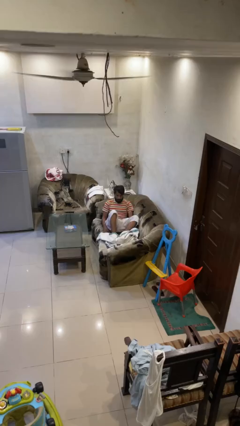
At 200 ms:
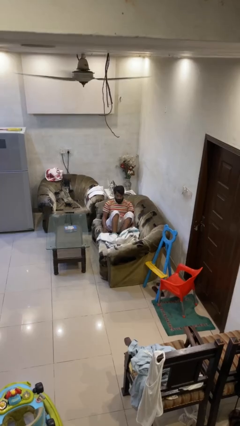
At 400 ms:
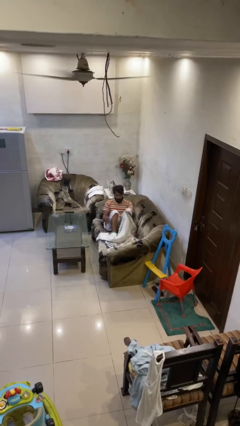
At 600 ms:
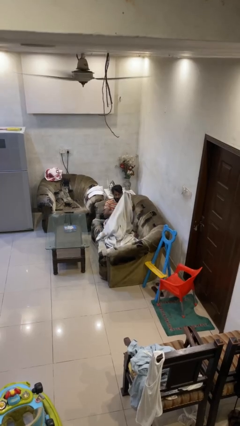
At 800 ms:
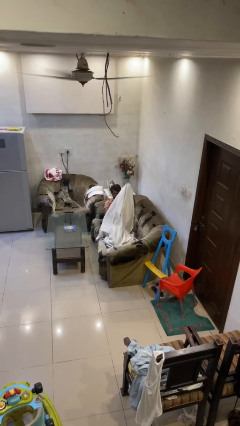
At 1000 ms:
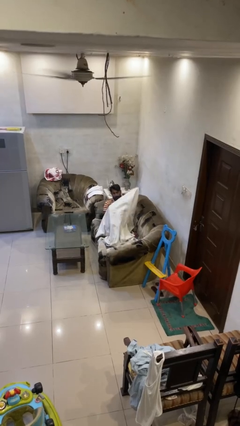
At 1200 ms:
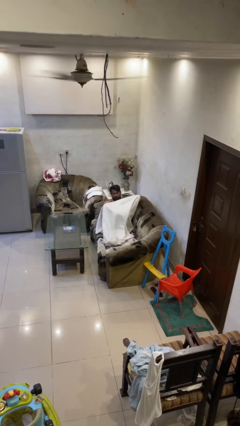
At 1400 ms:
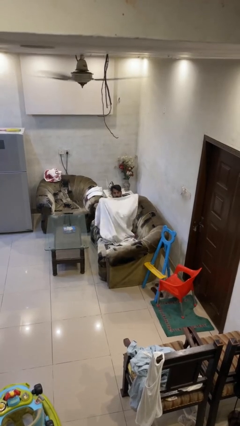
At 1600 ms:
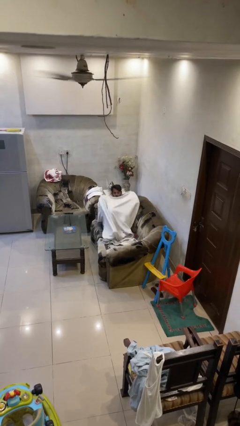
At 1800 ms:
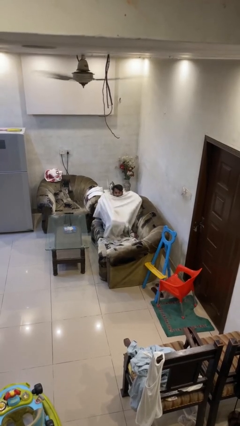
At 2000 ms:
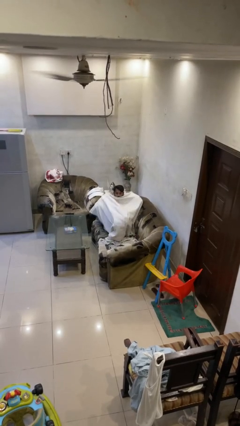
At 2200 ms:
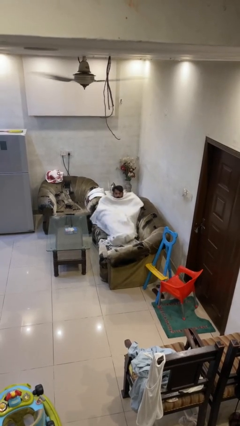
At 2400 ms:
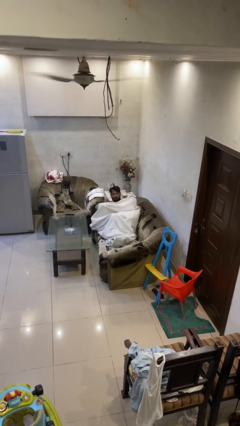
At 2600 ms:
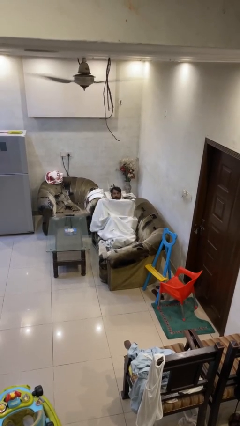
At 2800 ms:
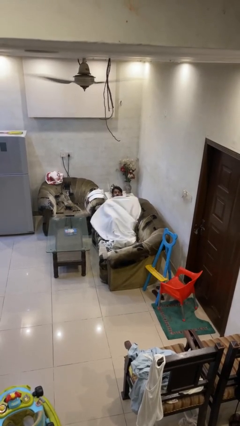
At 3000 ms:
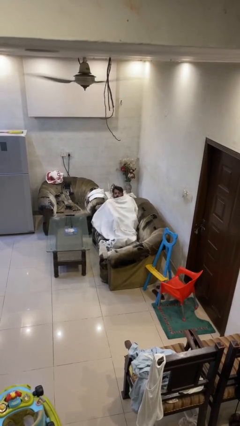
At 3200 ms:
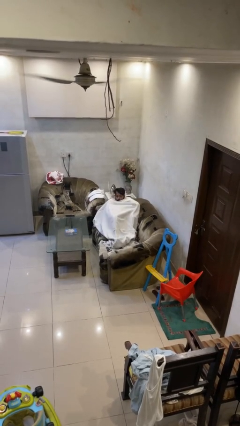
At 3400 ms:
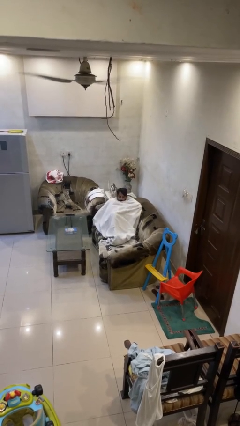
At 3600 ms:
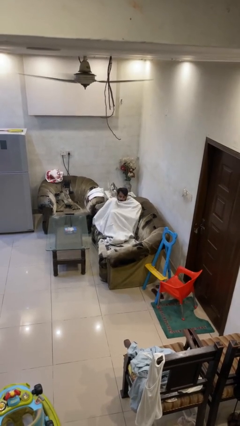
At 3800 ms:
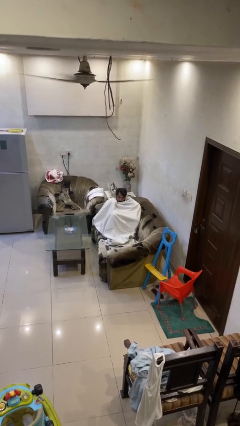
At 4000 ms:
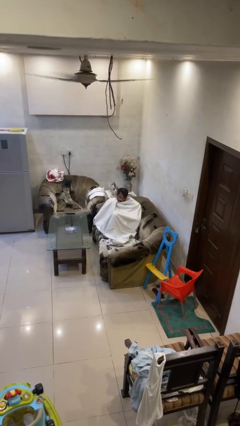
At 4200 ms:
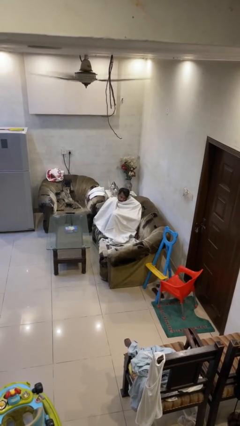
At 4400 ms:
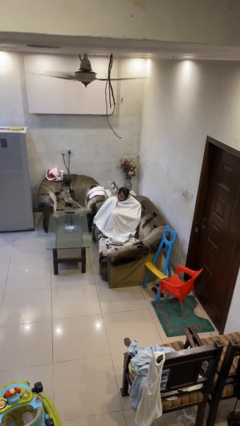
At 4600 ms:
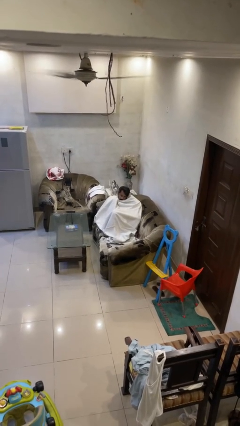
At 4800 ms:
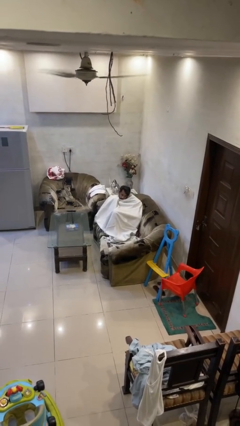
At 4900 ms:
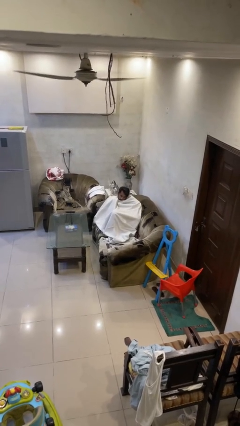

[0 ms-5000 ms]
person covers with blanket

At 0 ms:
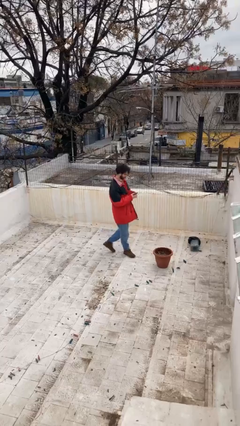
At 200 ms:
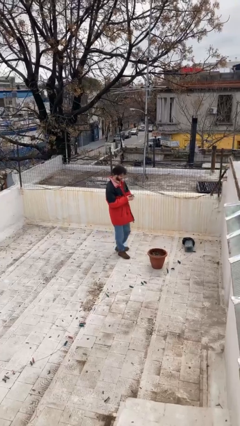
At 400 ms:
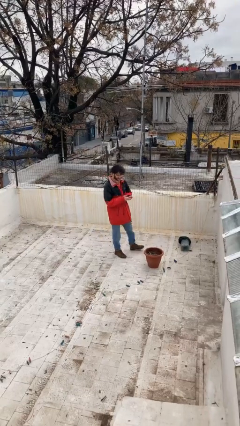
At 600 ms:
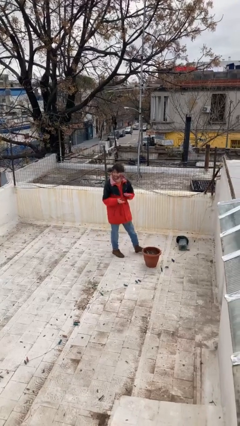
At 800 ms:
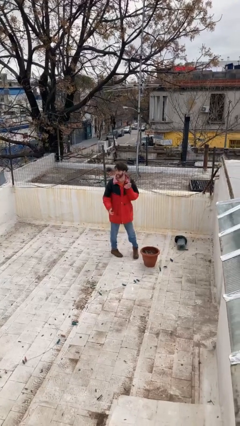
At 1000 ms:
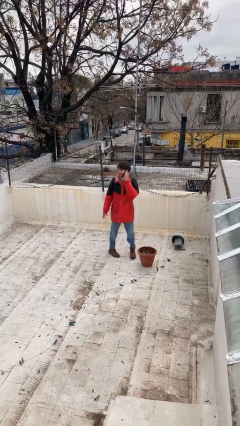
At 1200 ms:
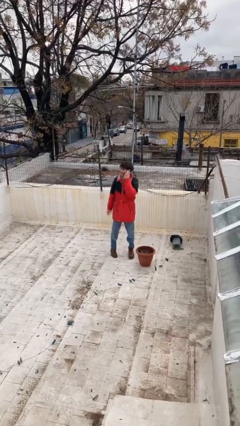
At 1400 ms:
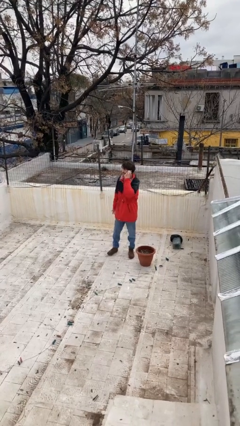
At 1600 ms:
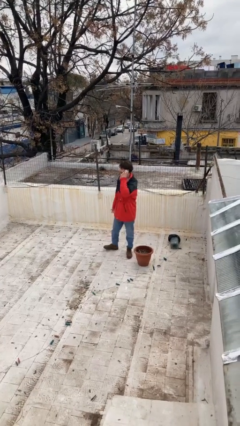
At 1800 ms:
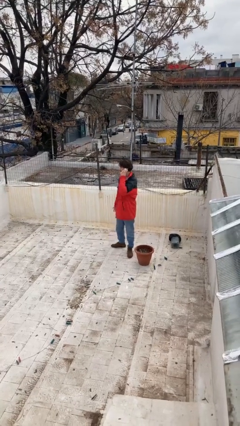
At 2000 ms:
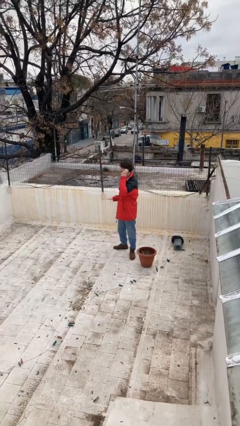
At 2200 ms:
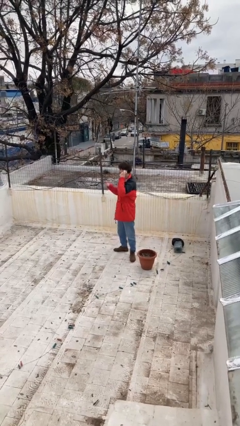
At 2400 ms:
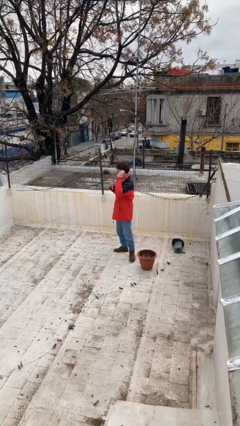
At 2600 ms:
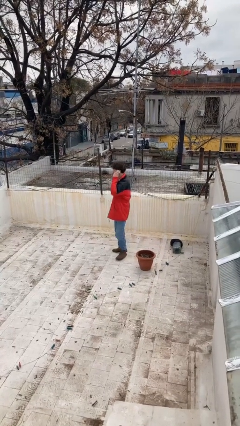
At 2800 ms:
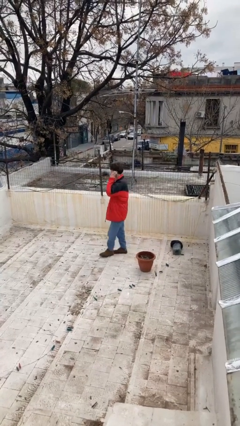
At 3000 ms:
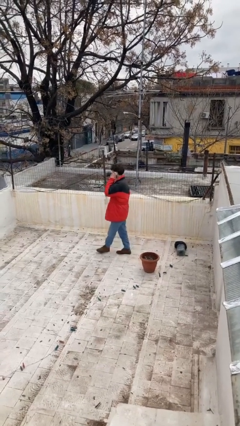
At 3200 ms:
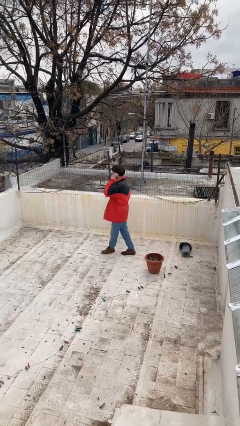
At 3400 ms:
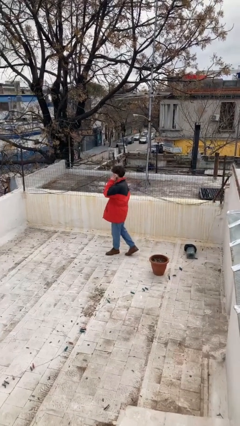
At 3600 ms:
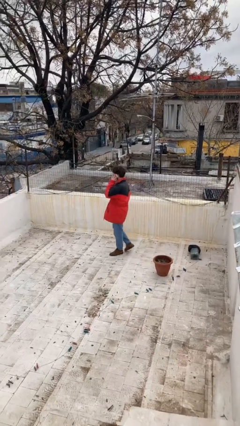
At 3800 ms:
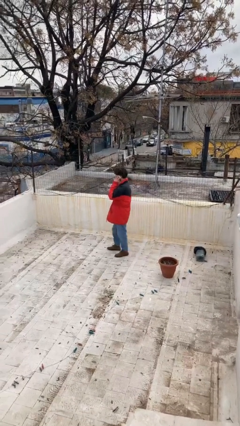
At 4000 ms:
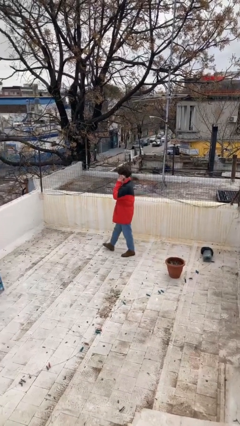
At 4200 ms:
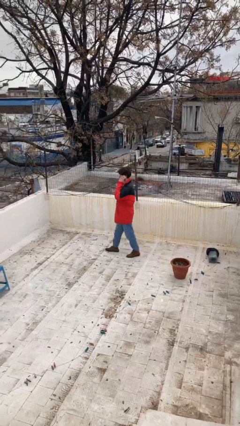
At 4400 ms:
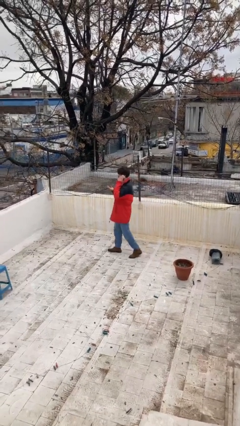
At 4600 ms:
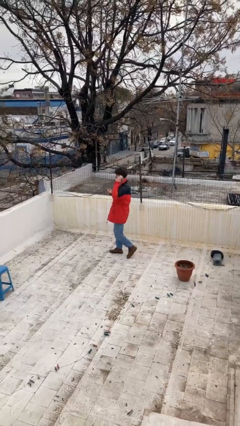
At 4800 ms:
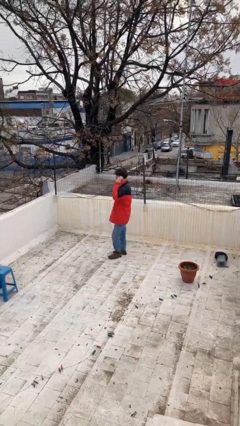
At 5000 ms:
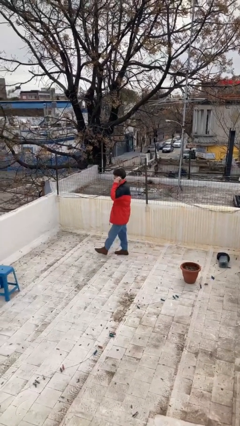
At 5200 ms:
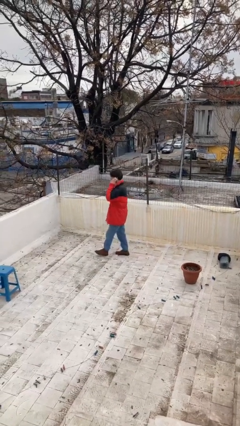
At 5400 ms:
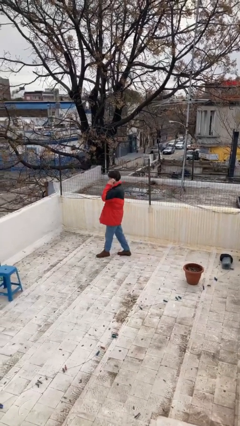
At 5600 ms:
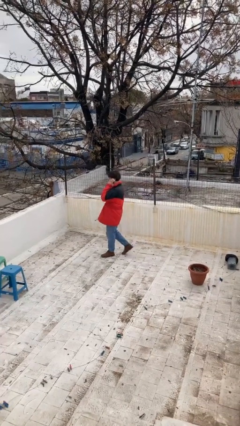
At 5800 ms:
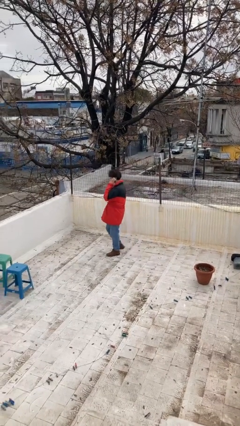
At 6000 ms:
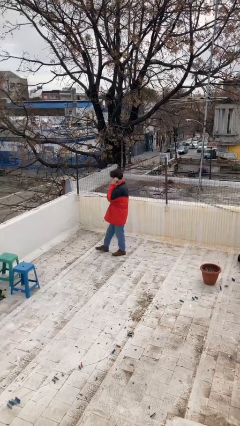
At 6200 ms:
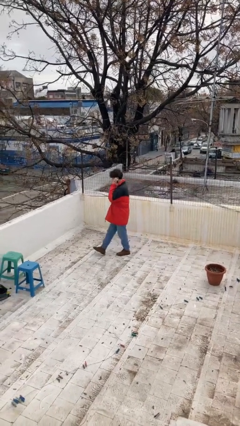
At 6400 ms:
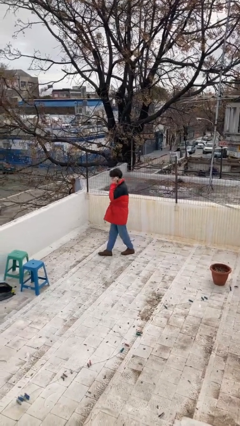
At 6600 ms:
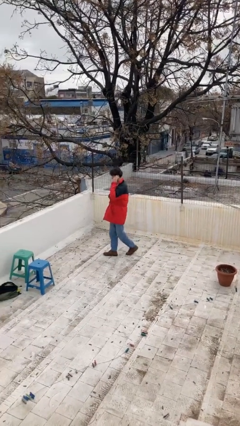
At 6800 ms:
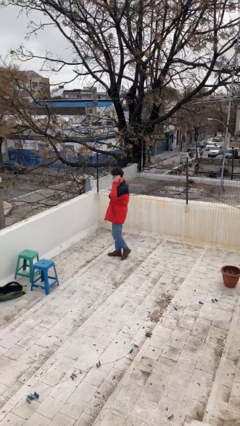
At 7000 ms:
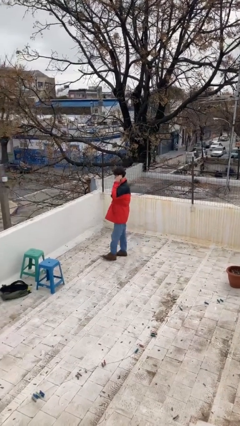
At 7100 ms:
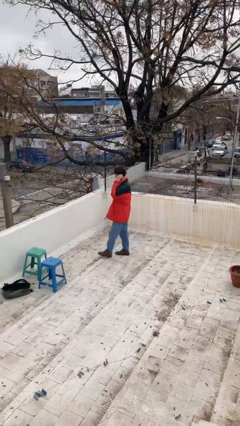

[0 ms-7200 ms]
person talks on phone

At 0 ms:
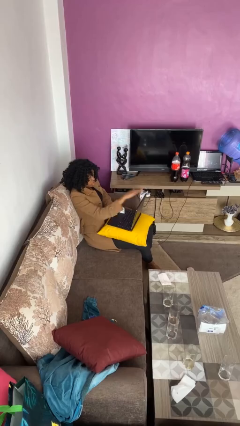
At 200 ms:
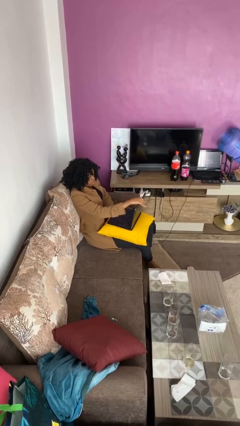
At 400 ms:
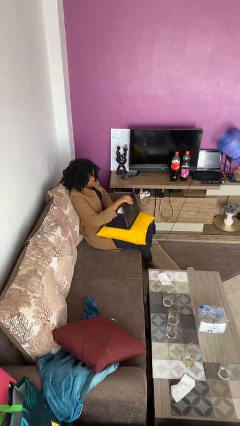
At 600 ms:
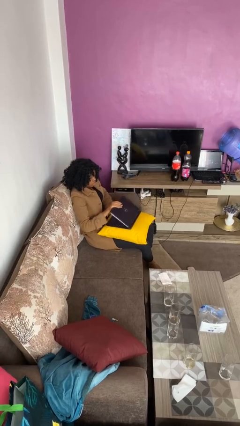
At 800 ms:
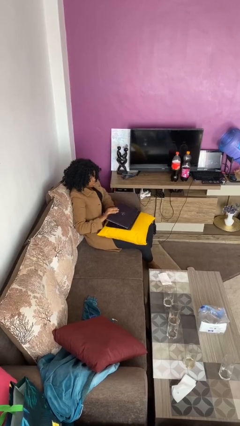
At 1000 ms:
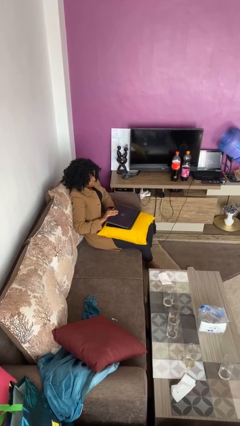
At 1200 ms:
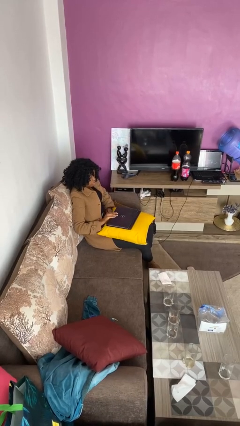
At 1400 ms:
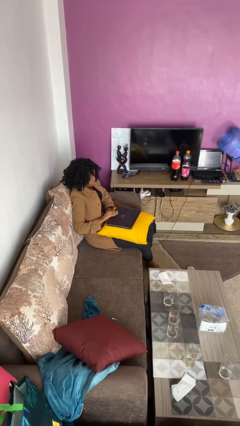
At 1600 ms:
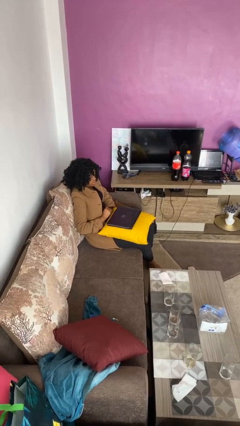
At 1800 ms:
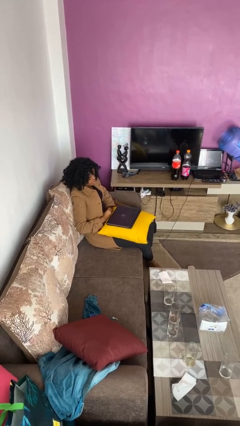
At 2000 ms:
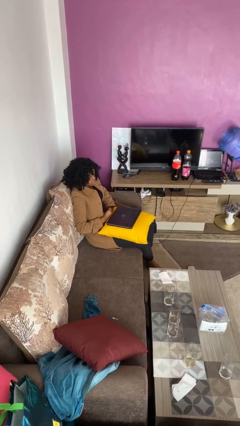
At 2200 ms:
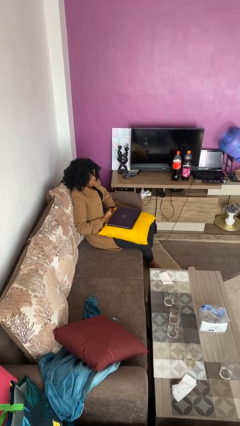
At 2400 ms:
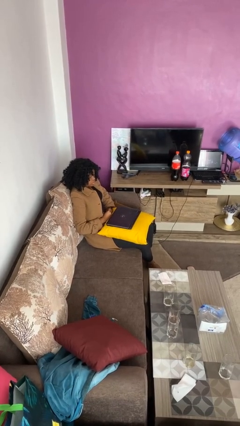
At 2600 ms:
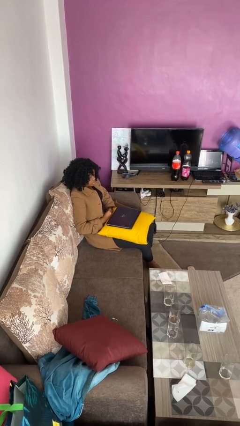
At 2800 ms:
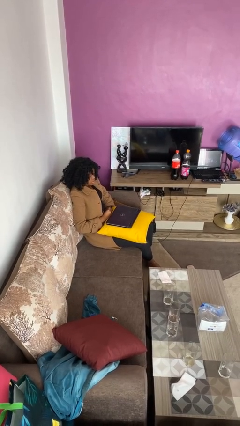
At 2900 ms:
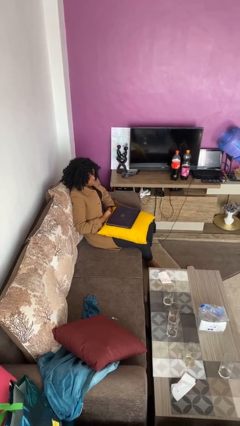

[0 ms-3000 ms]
person closes laptop

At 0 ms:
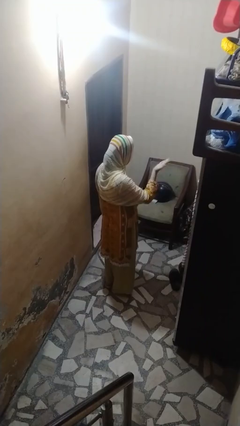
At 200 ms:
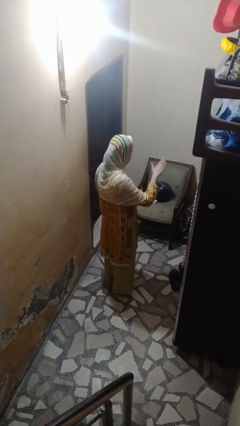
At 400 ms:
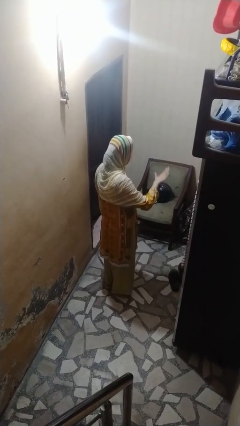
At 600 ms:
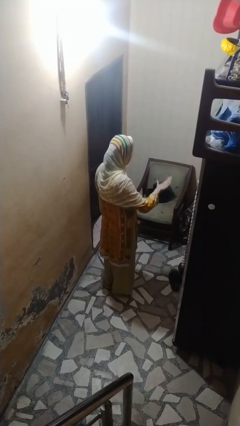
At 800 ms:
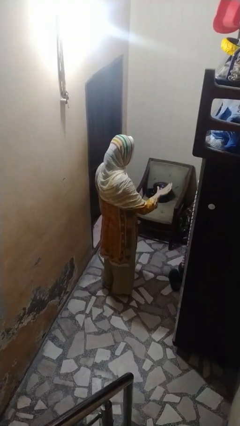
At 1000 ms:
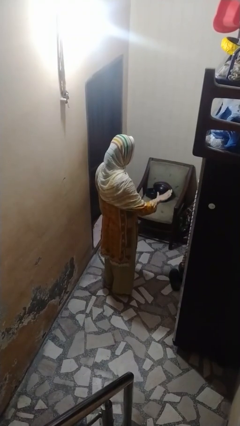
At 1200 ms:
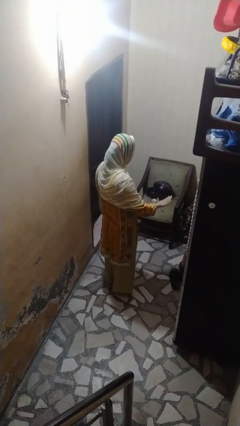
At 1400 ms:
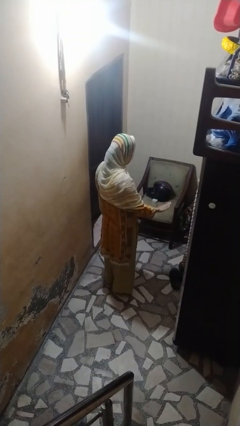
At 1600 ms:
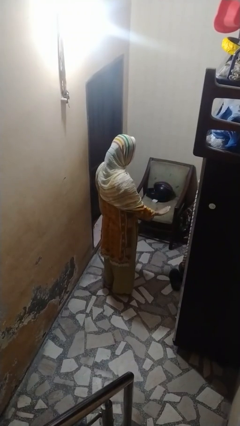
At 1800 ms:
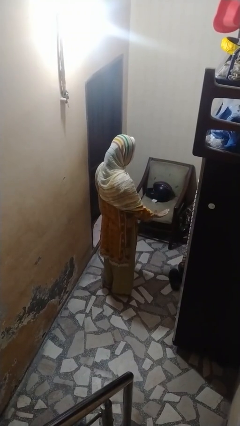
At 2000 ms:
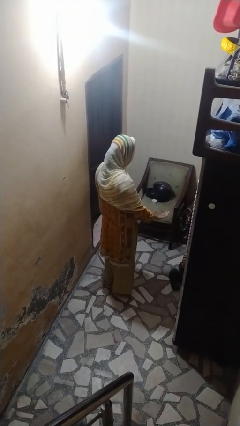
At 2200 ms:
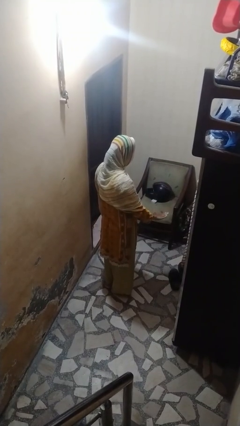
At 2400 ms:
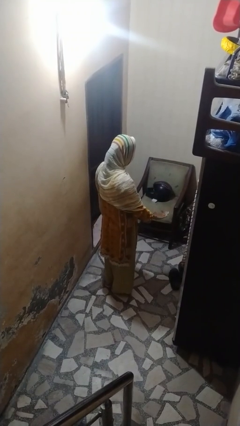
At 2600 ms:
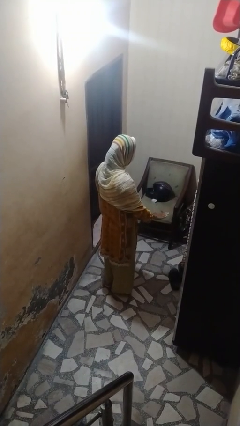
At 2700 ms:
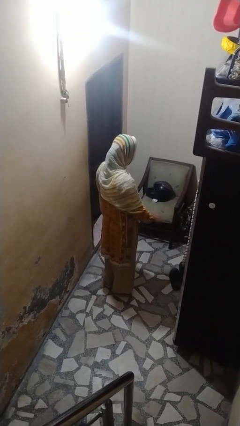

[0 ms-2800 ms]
person gestures swipe down
